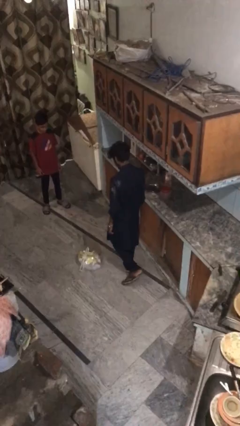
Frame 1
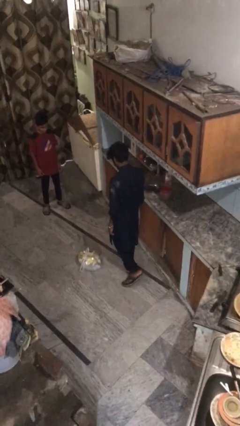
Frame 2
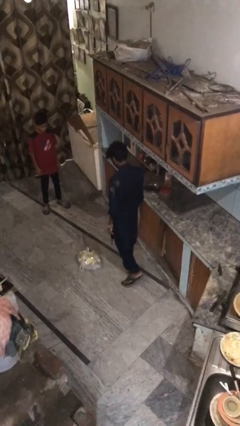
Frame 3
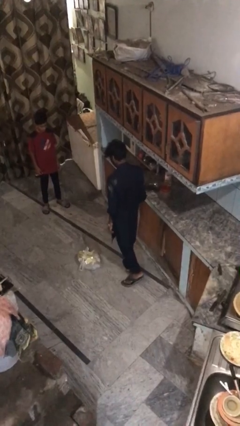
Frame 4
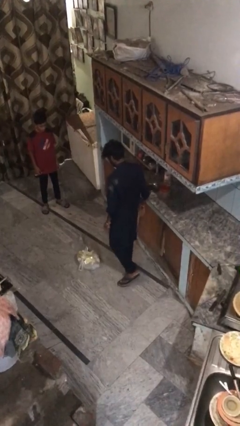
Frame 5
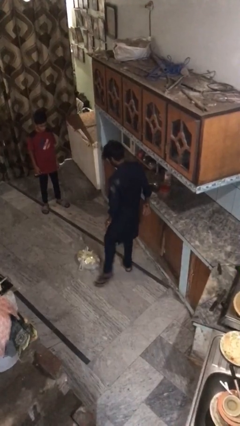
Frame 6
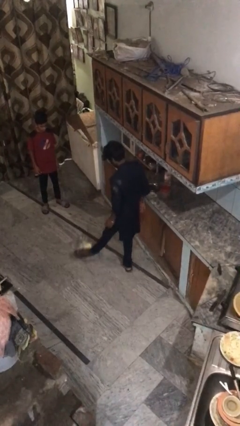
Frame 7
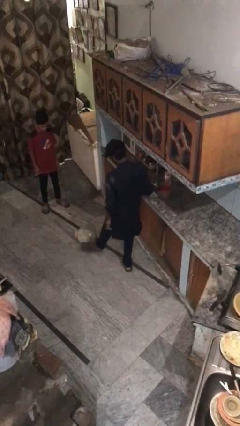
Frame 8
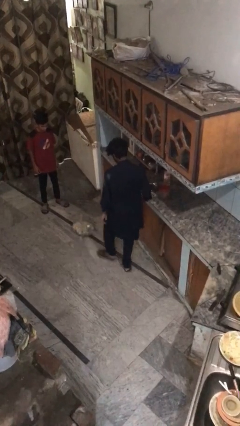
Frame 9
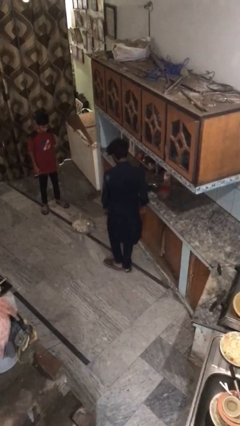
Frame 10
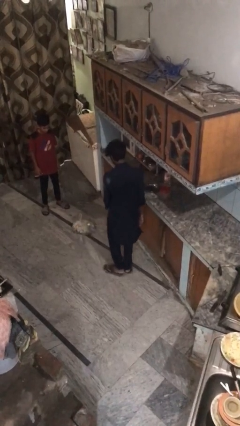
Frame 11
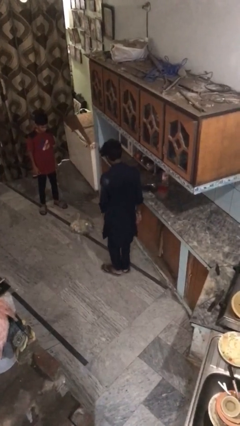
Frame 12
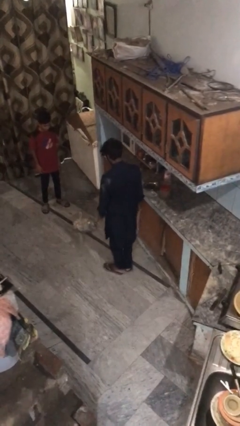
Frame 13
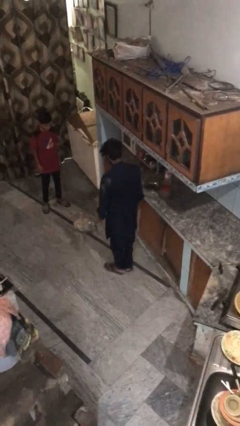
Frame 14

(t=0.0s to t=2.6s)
person kicks object to person

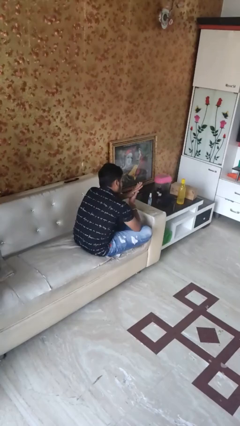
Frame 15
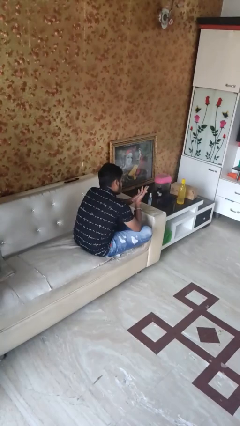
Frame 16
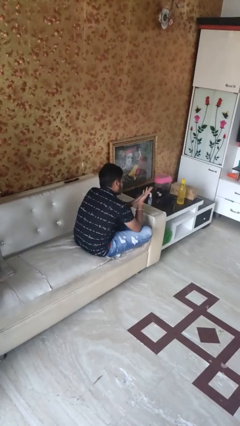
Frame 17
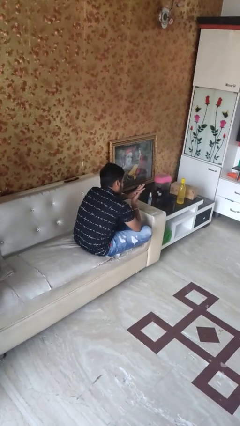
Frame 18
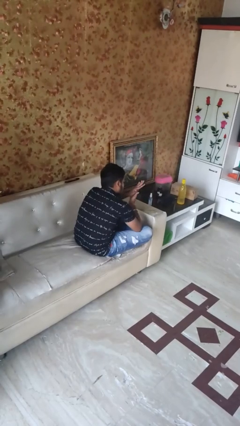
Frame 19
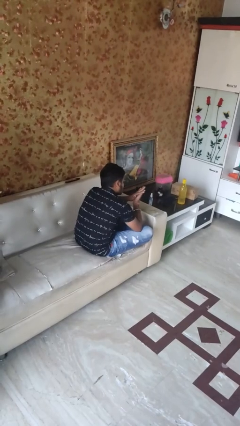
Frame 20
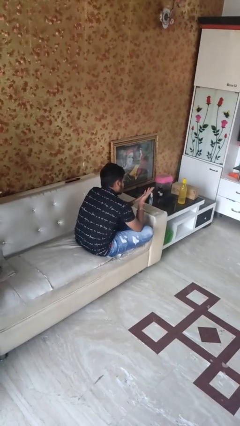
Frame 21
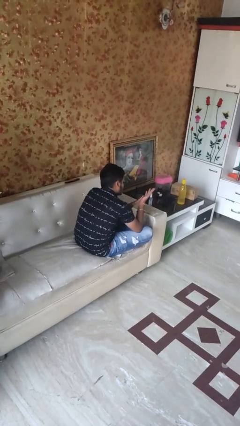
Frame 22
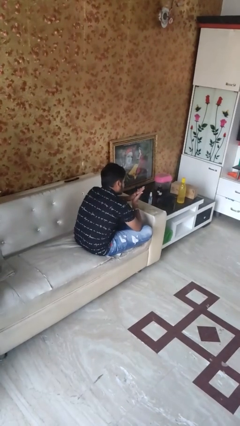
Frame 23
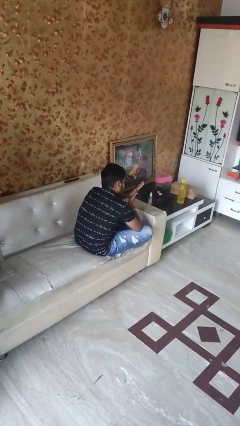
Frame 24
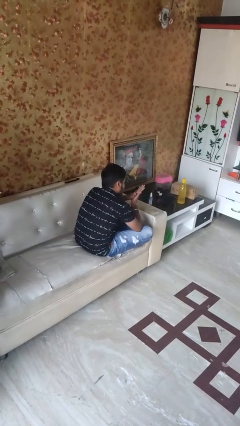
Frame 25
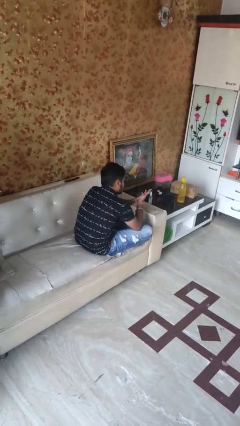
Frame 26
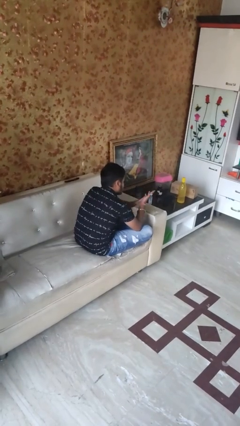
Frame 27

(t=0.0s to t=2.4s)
person looks at hands in lap

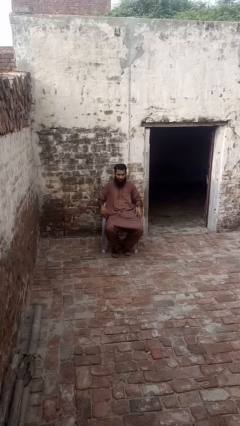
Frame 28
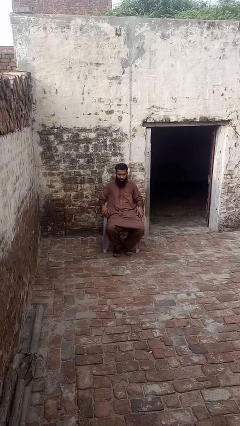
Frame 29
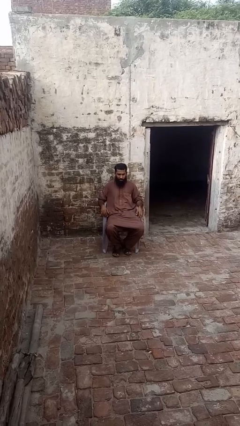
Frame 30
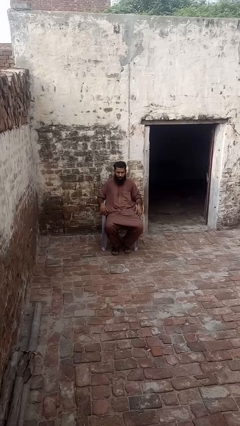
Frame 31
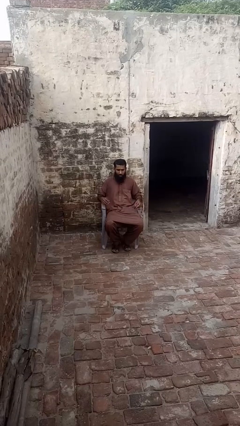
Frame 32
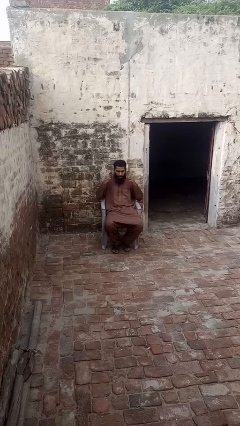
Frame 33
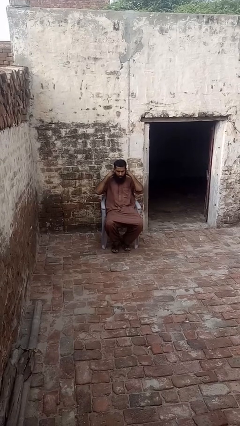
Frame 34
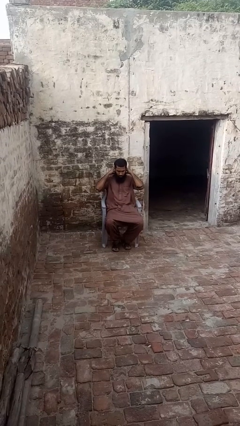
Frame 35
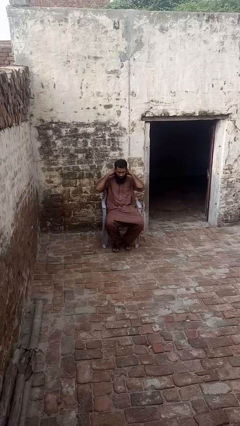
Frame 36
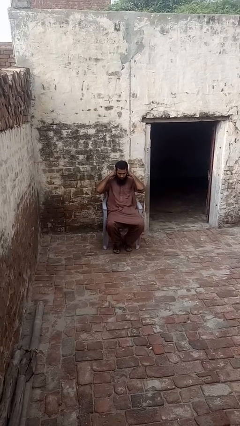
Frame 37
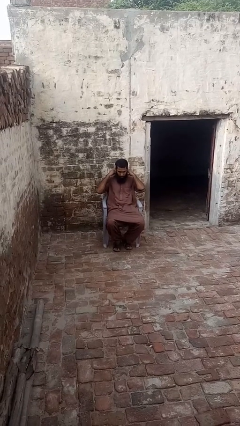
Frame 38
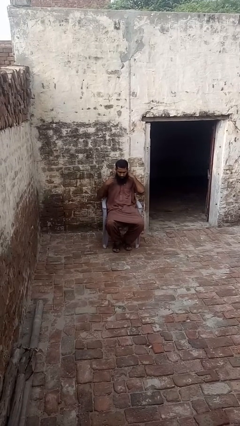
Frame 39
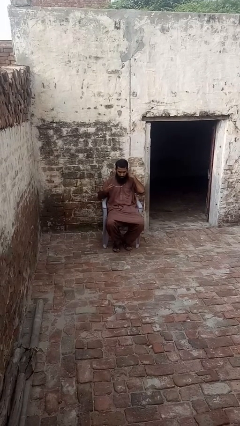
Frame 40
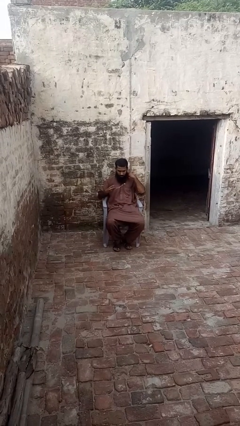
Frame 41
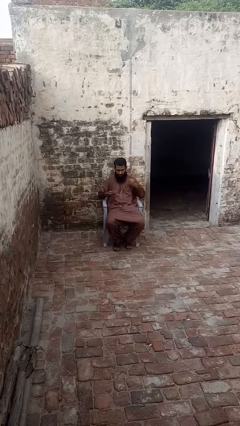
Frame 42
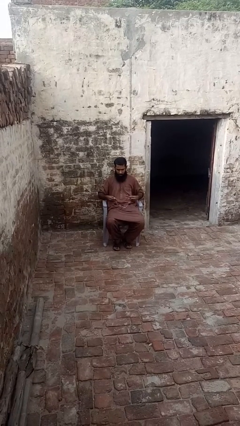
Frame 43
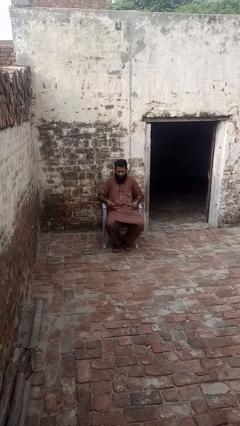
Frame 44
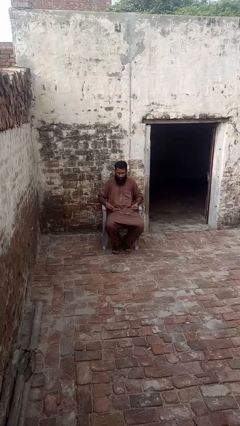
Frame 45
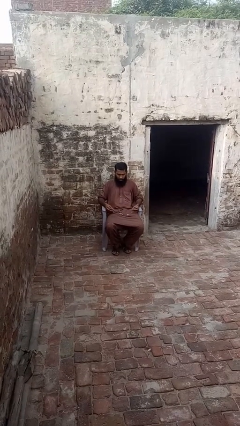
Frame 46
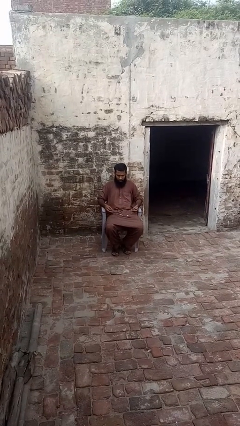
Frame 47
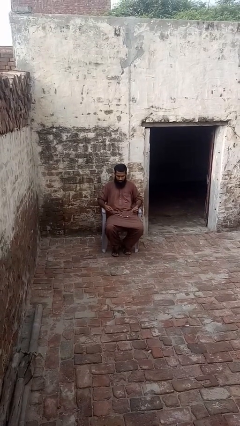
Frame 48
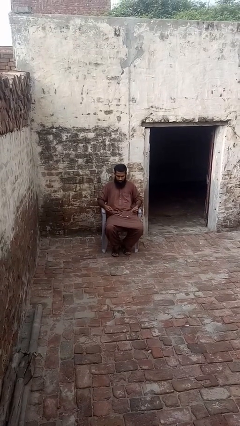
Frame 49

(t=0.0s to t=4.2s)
person takes off necklace

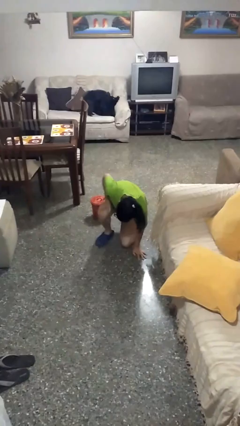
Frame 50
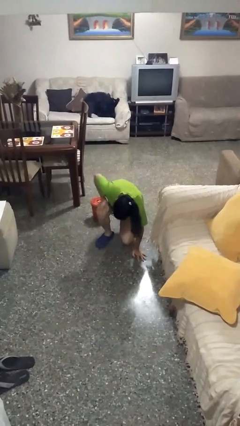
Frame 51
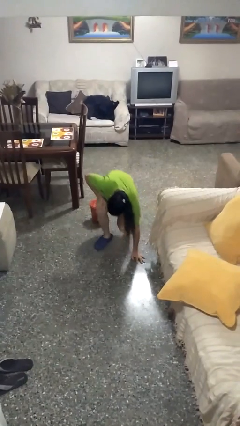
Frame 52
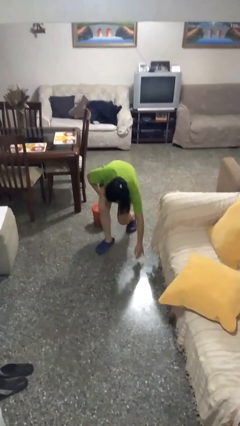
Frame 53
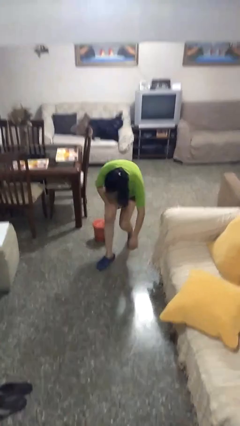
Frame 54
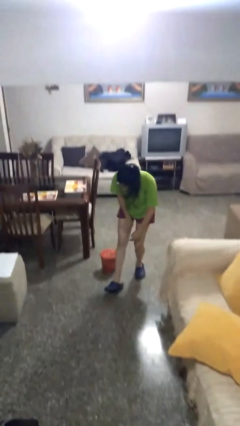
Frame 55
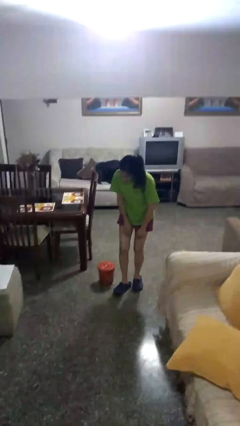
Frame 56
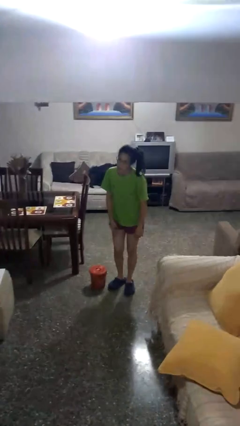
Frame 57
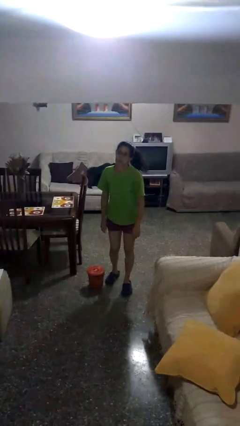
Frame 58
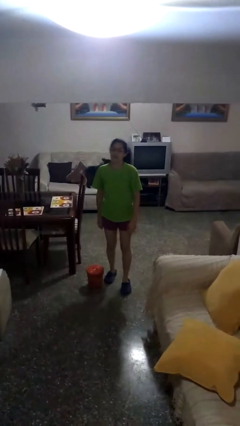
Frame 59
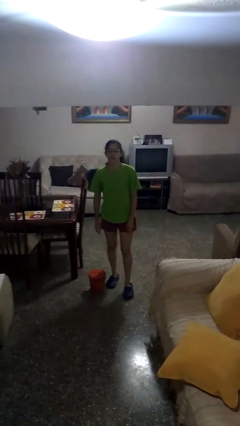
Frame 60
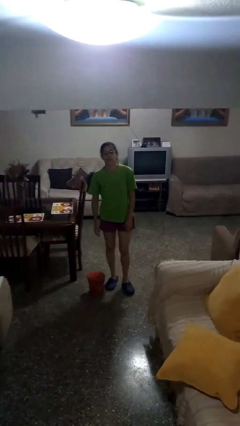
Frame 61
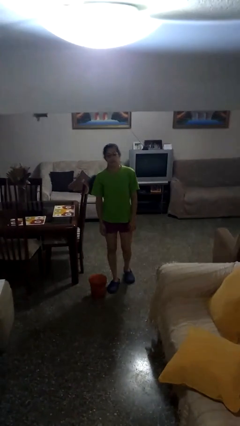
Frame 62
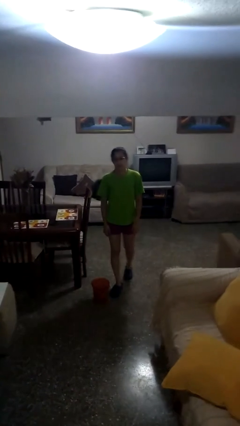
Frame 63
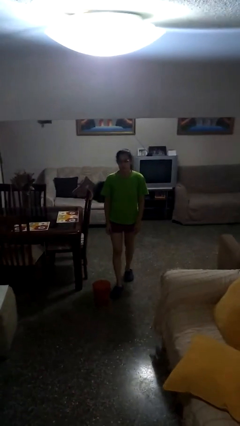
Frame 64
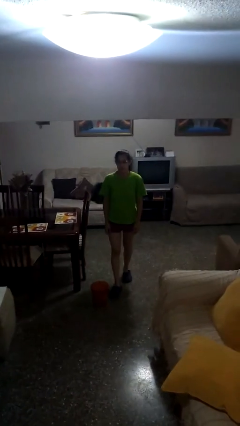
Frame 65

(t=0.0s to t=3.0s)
person stands up from floor

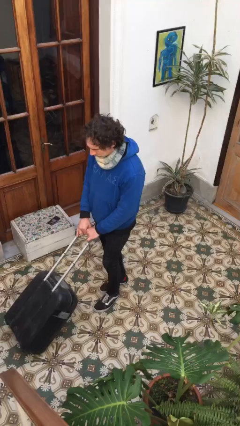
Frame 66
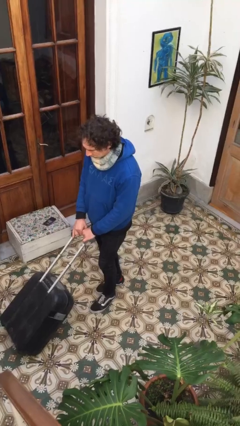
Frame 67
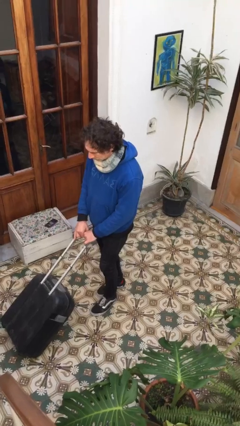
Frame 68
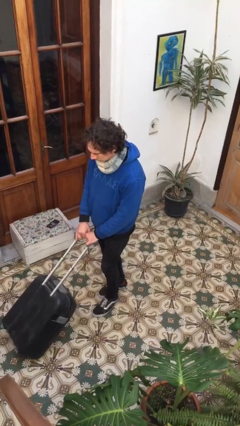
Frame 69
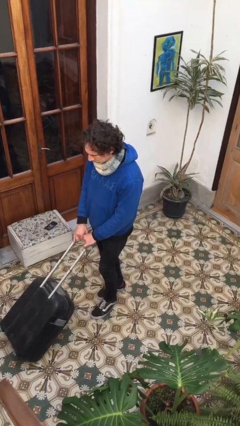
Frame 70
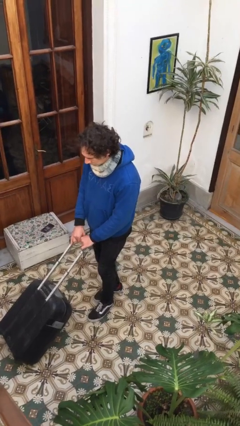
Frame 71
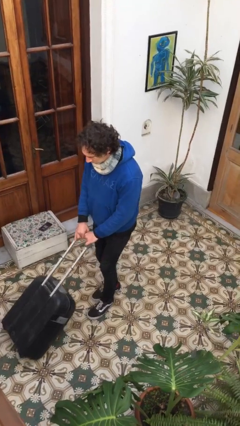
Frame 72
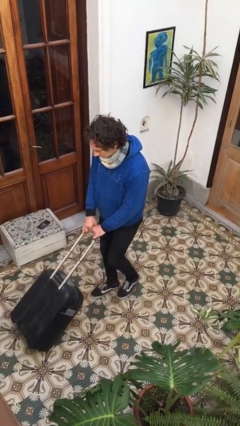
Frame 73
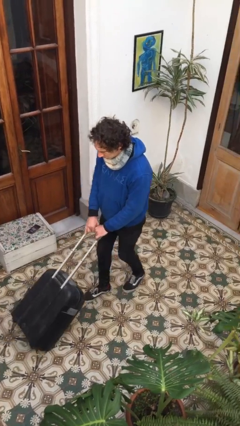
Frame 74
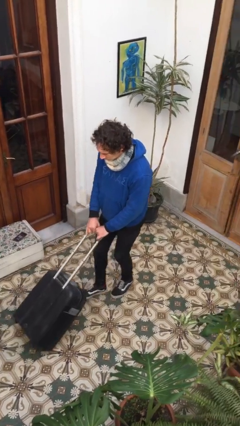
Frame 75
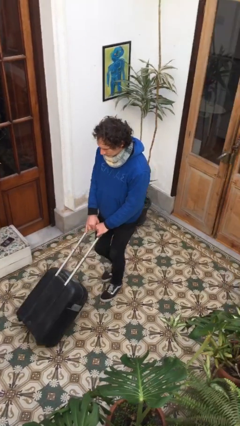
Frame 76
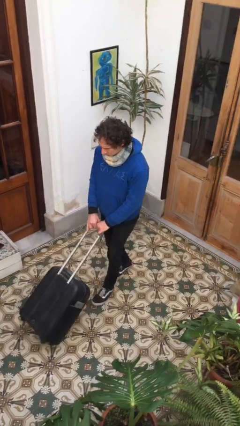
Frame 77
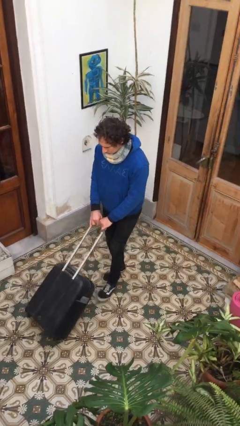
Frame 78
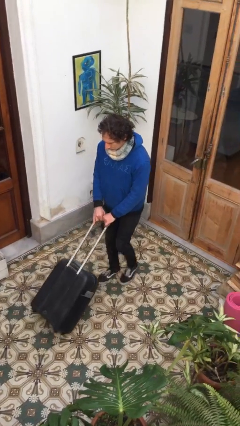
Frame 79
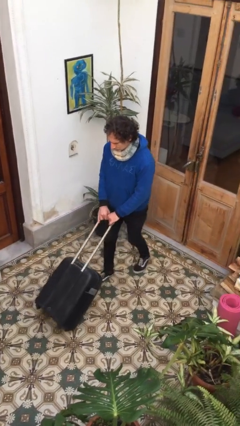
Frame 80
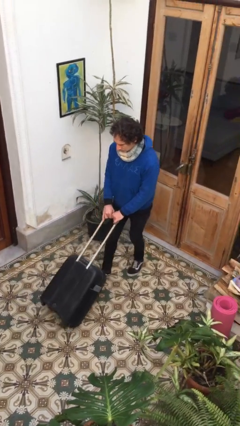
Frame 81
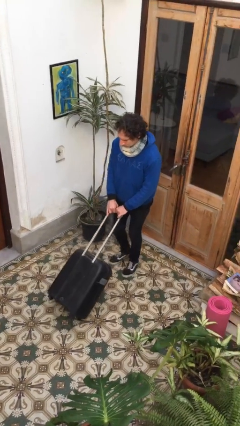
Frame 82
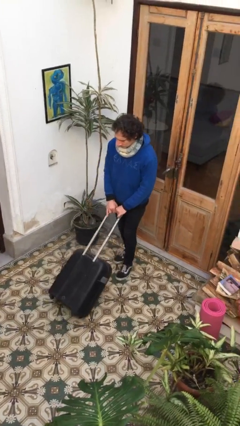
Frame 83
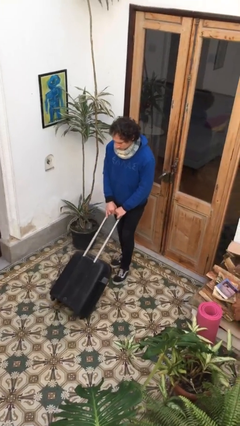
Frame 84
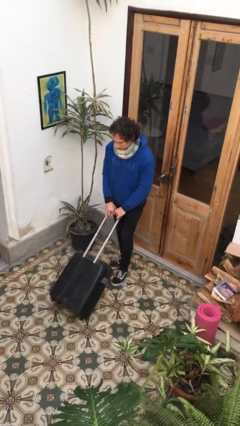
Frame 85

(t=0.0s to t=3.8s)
person pulls wheeled cart

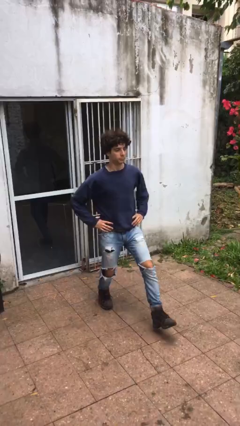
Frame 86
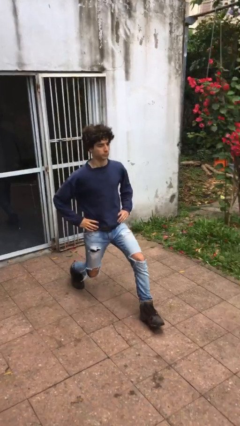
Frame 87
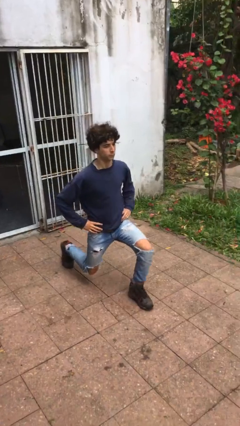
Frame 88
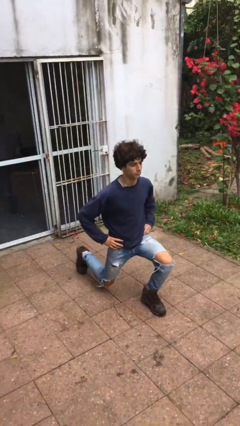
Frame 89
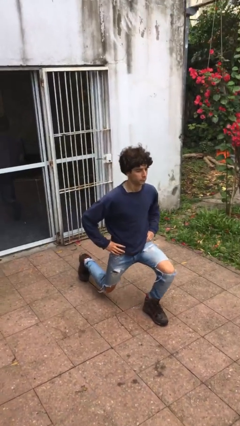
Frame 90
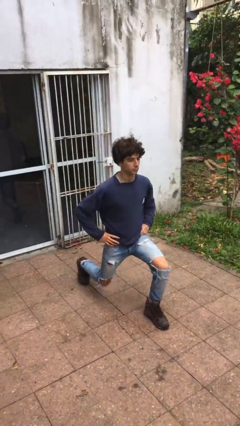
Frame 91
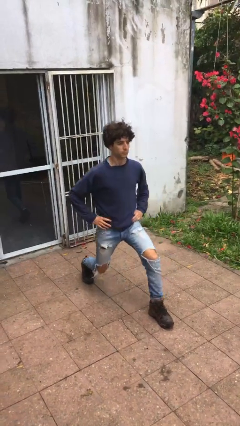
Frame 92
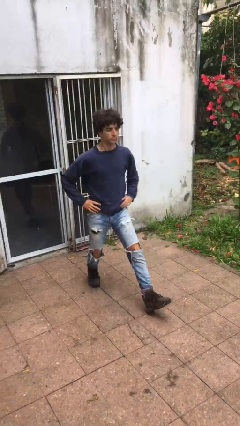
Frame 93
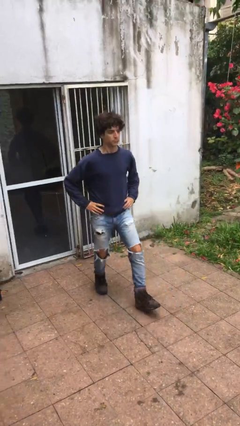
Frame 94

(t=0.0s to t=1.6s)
person exercises with lunges
